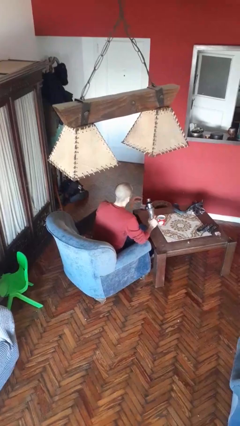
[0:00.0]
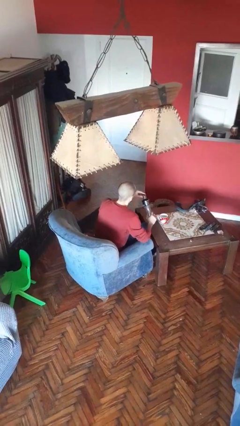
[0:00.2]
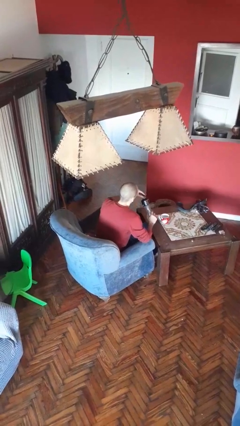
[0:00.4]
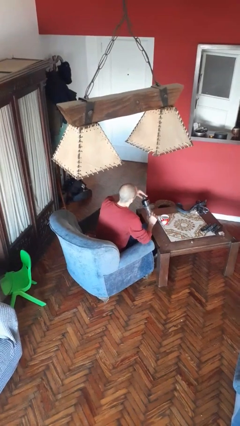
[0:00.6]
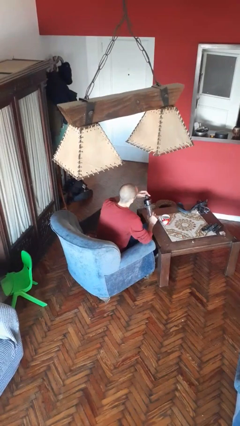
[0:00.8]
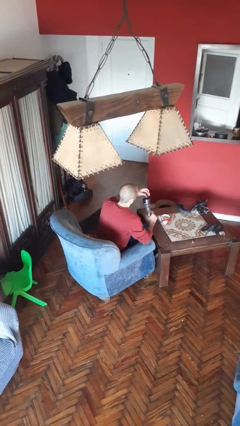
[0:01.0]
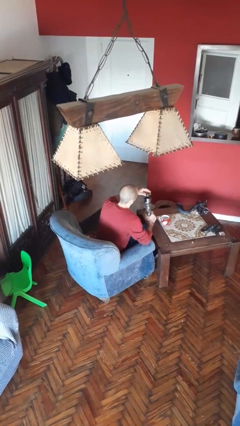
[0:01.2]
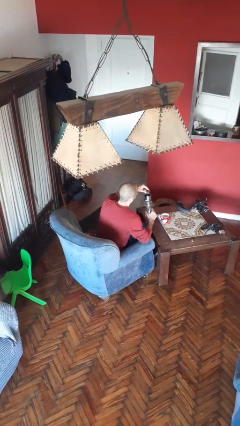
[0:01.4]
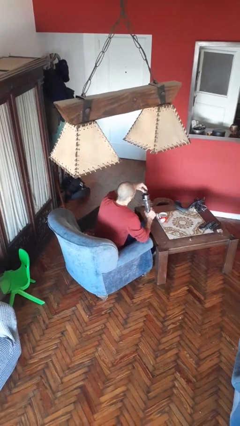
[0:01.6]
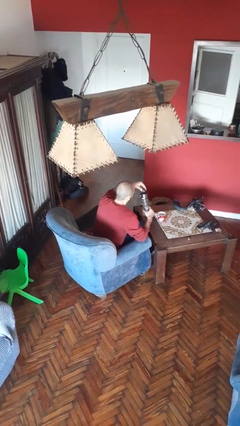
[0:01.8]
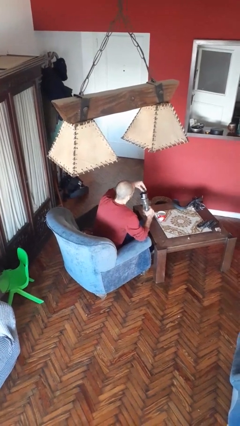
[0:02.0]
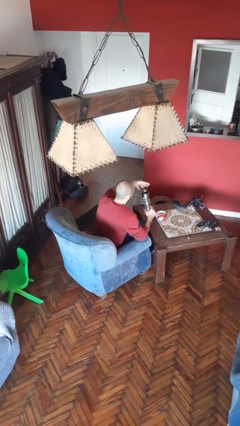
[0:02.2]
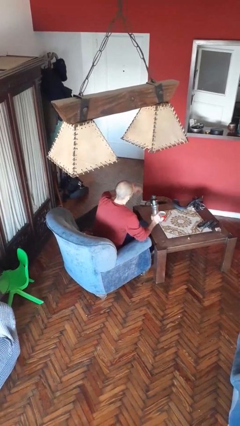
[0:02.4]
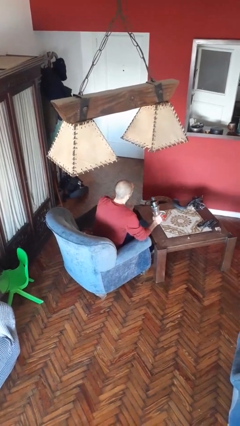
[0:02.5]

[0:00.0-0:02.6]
person screws lid to bottle

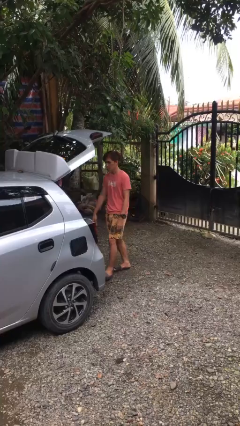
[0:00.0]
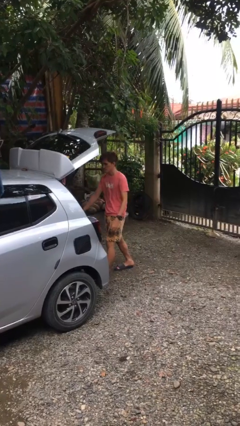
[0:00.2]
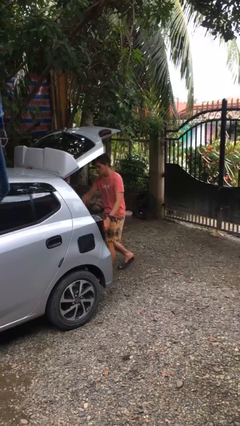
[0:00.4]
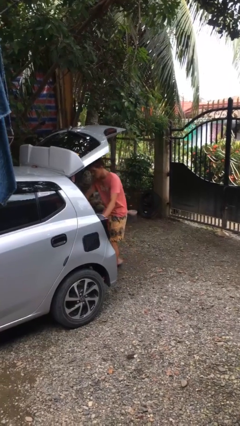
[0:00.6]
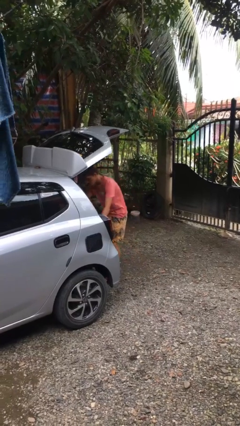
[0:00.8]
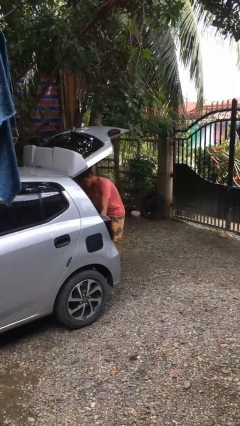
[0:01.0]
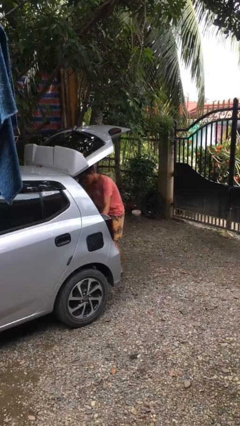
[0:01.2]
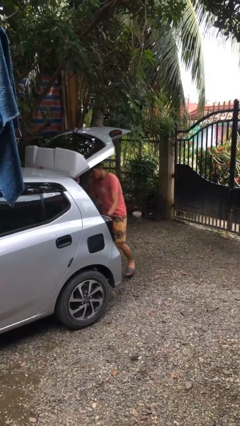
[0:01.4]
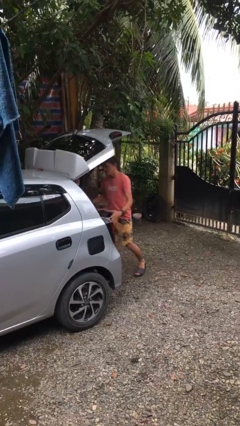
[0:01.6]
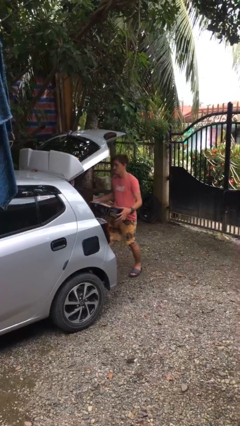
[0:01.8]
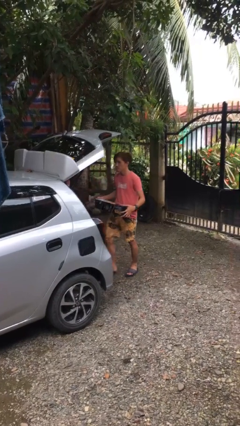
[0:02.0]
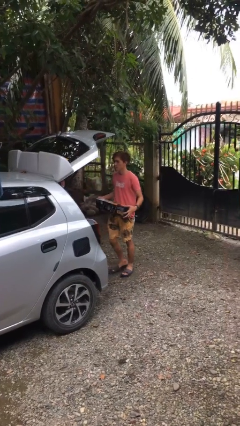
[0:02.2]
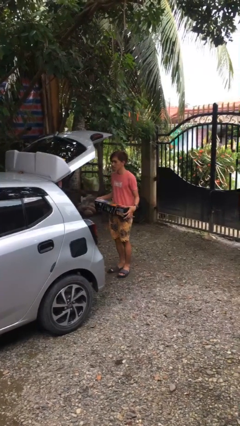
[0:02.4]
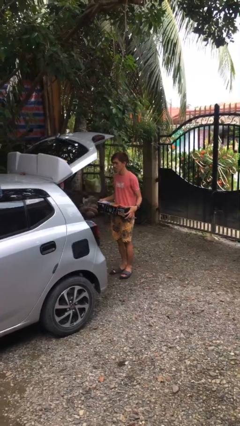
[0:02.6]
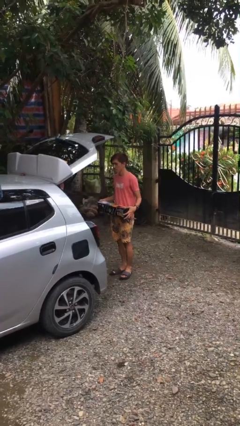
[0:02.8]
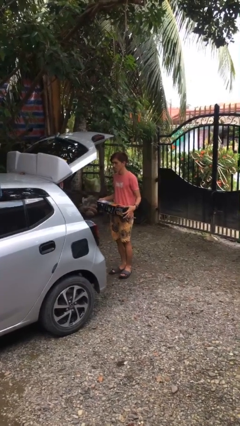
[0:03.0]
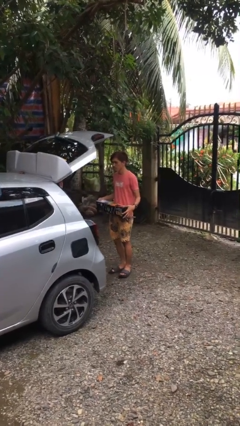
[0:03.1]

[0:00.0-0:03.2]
person unloads car

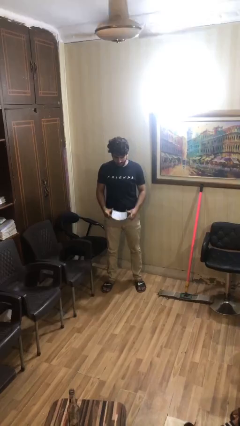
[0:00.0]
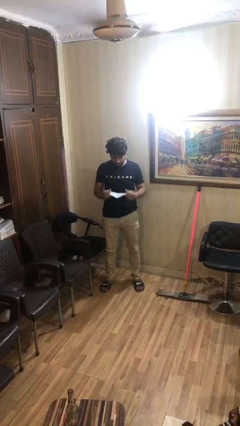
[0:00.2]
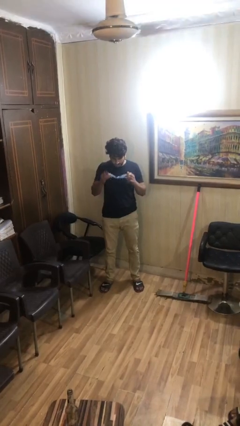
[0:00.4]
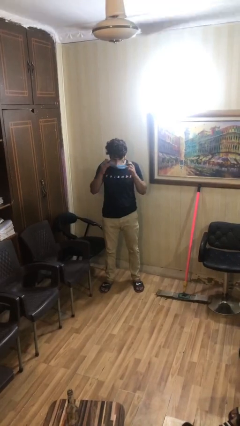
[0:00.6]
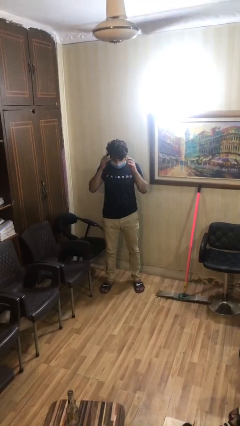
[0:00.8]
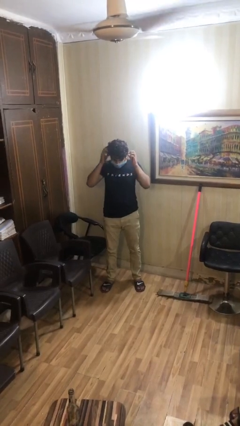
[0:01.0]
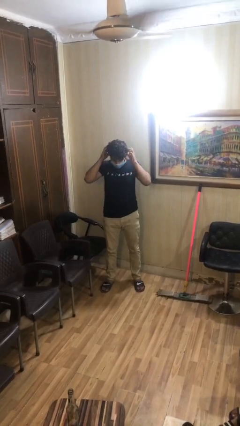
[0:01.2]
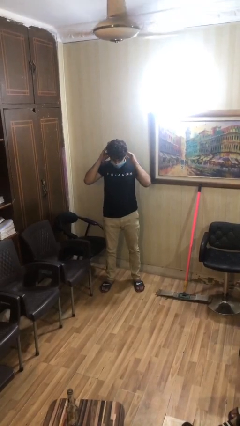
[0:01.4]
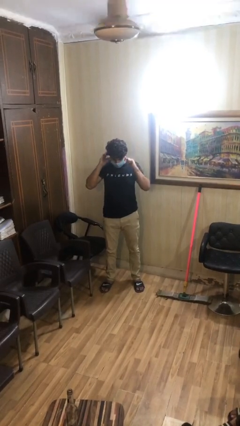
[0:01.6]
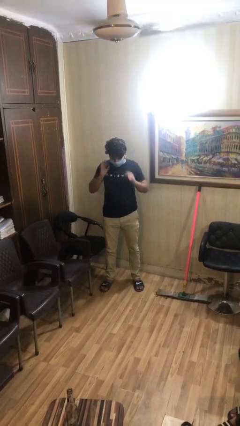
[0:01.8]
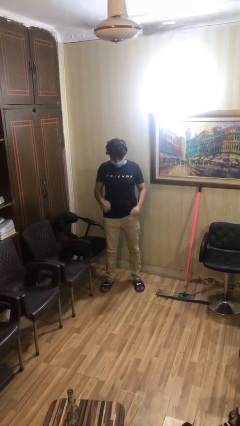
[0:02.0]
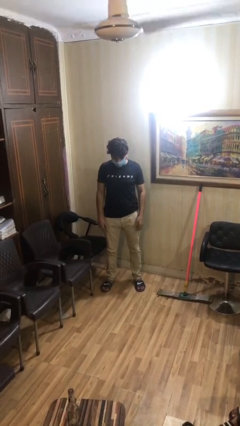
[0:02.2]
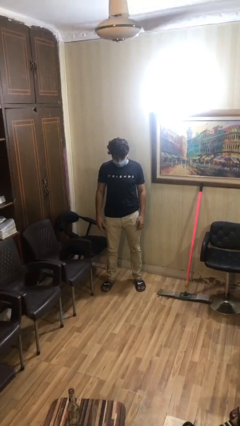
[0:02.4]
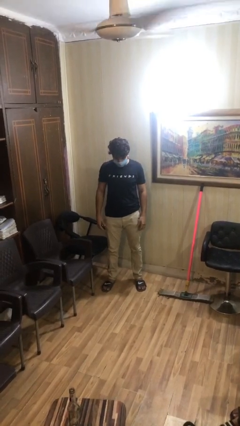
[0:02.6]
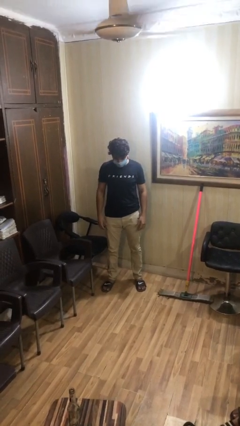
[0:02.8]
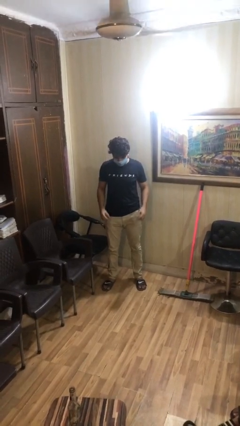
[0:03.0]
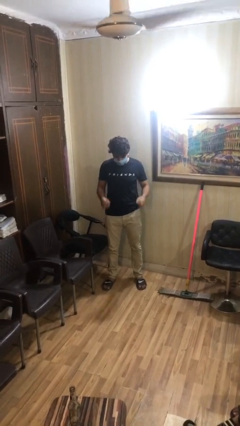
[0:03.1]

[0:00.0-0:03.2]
person puts on facemask

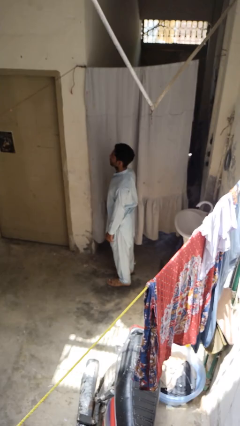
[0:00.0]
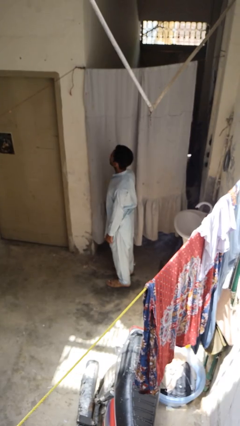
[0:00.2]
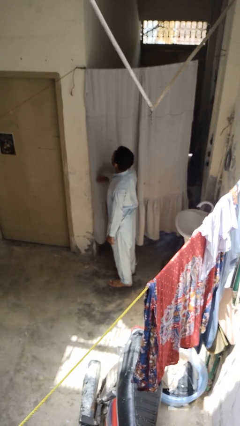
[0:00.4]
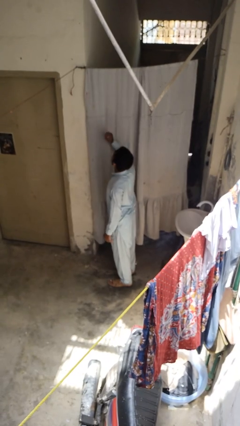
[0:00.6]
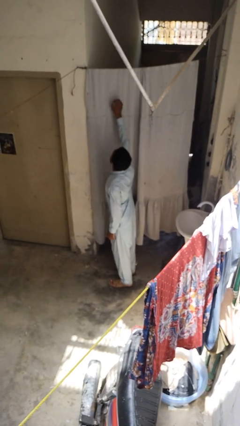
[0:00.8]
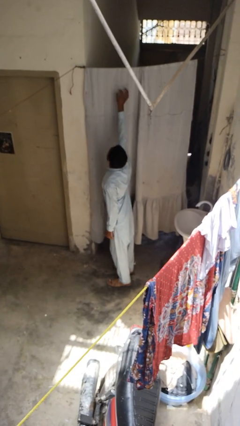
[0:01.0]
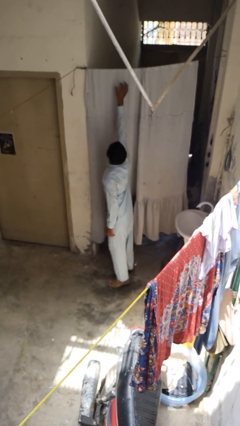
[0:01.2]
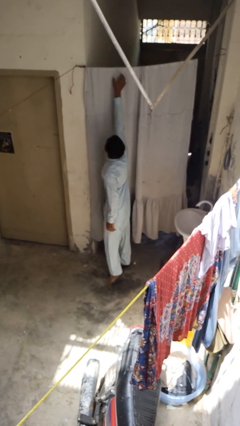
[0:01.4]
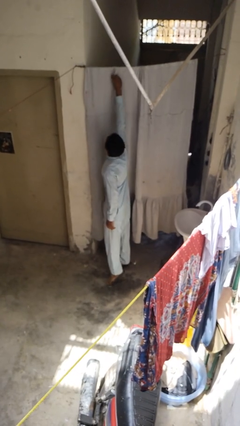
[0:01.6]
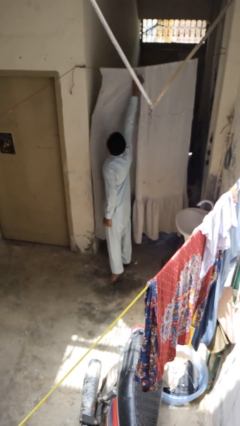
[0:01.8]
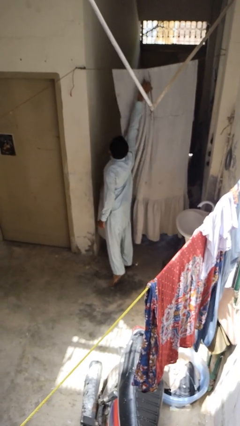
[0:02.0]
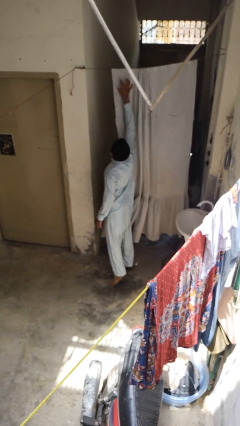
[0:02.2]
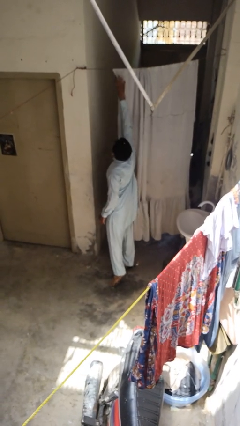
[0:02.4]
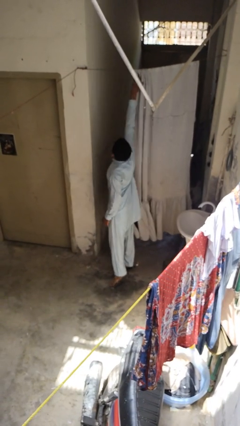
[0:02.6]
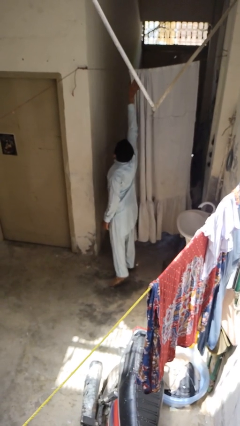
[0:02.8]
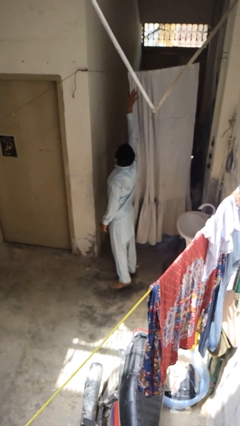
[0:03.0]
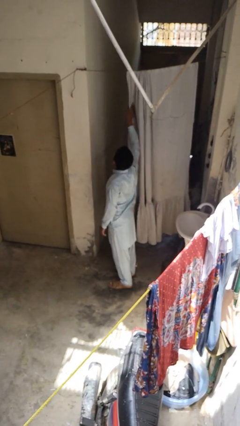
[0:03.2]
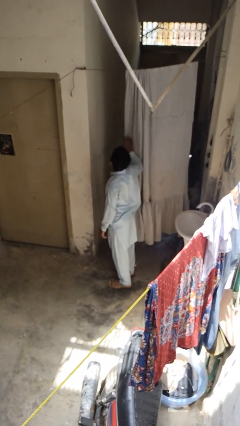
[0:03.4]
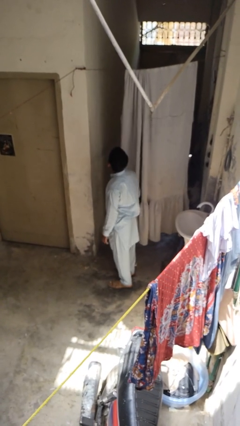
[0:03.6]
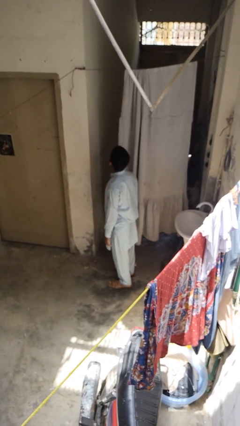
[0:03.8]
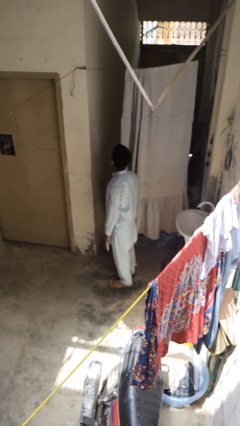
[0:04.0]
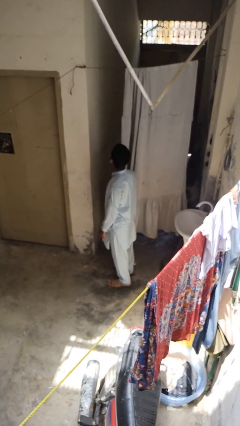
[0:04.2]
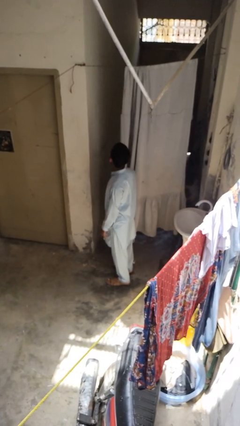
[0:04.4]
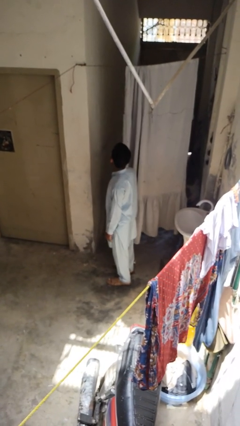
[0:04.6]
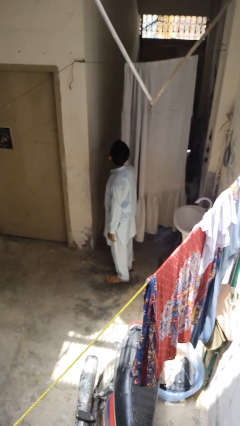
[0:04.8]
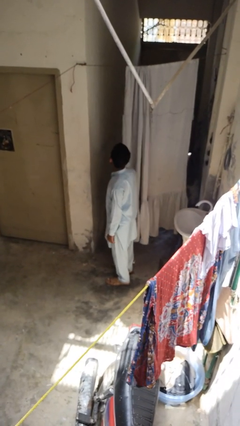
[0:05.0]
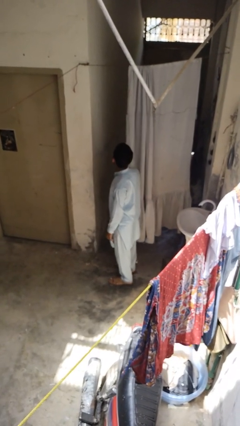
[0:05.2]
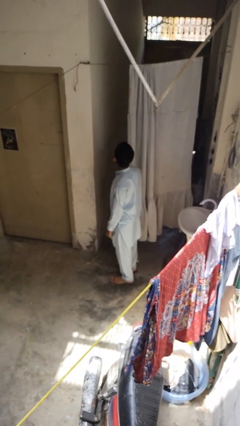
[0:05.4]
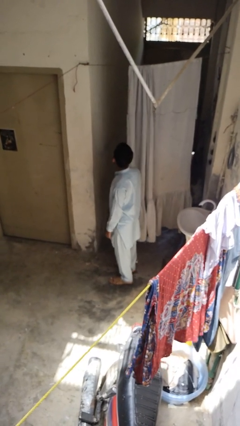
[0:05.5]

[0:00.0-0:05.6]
person opens curtains

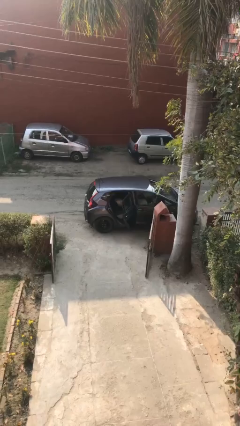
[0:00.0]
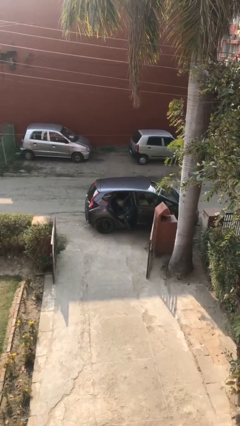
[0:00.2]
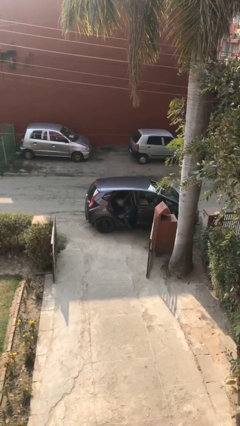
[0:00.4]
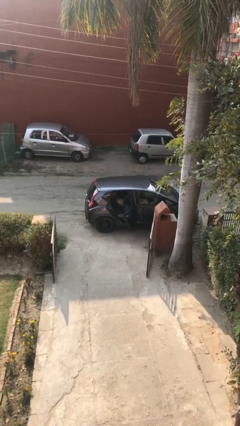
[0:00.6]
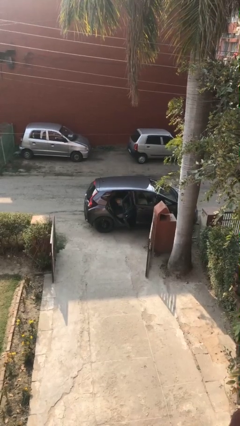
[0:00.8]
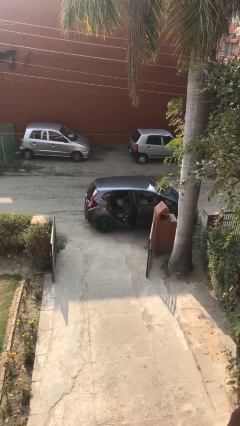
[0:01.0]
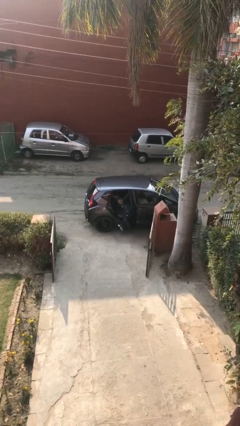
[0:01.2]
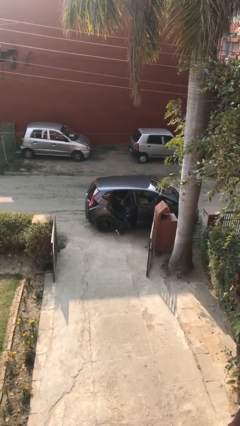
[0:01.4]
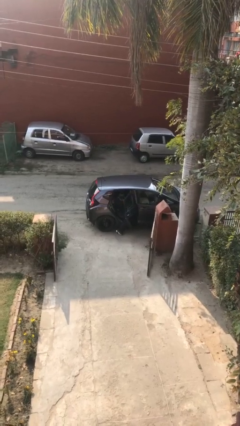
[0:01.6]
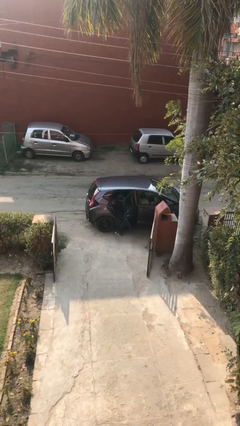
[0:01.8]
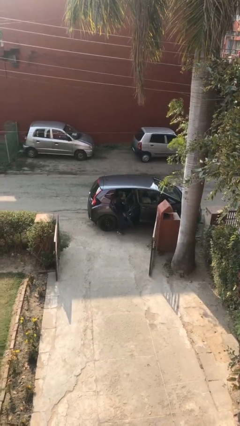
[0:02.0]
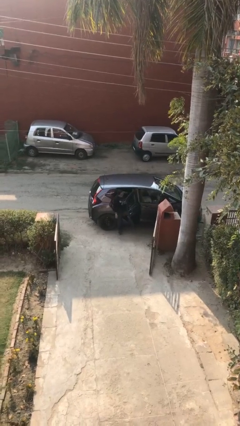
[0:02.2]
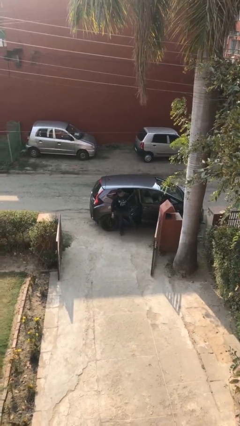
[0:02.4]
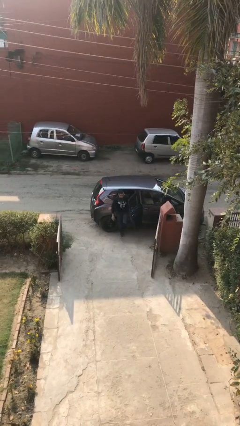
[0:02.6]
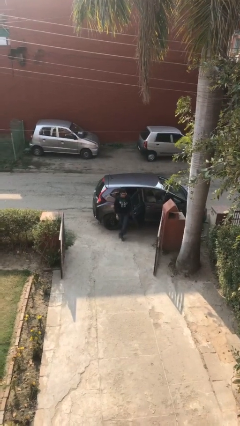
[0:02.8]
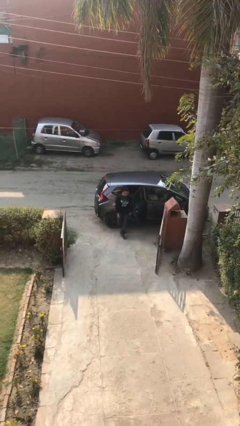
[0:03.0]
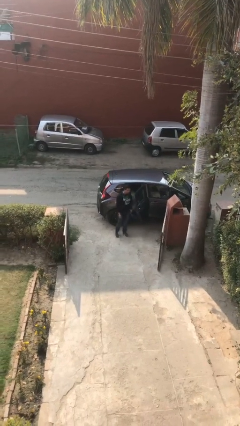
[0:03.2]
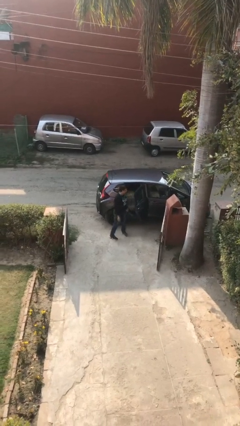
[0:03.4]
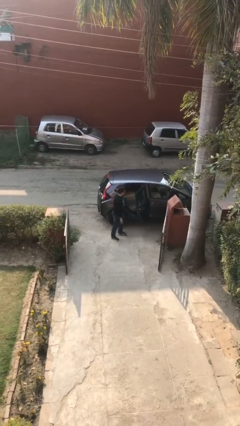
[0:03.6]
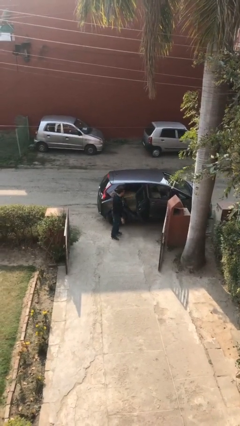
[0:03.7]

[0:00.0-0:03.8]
person exits car
